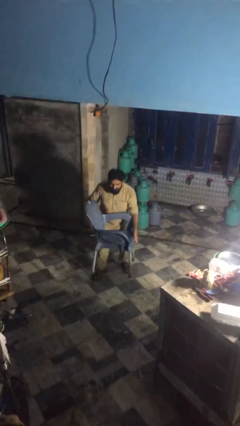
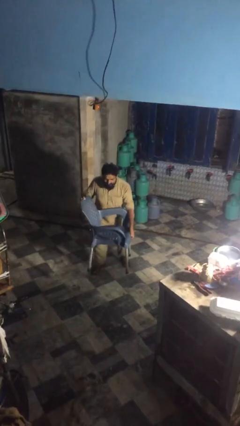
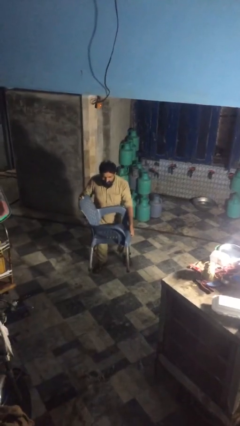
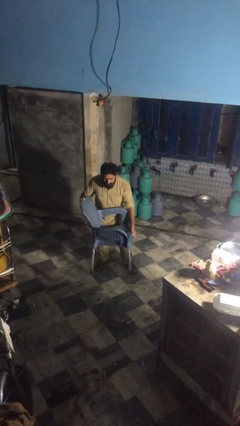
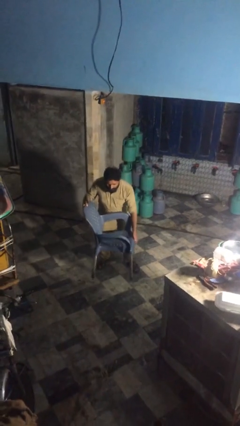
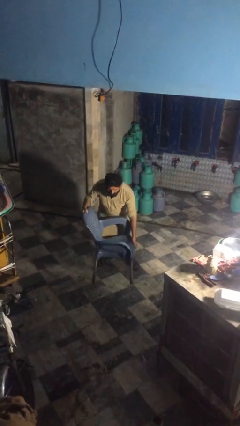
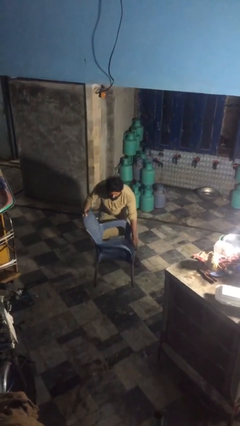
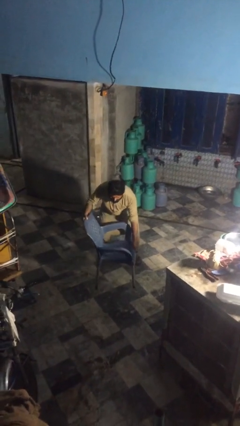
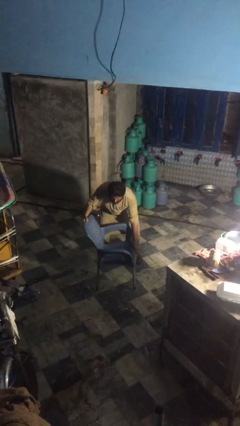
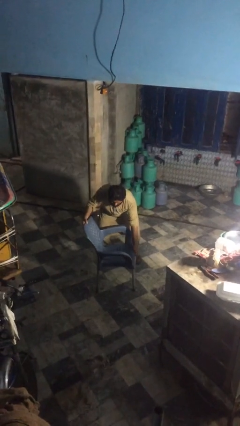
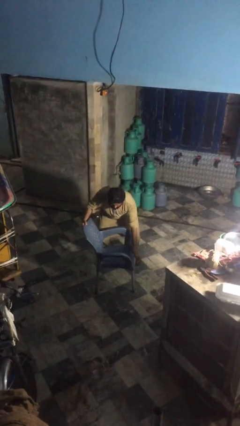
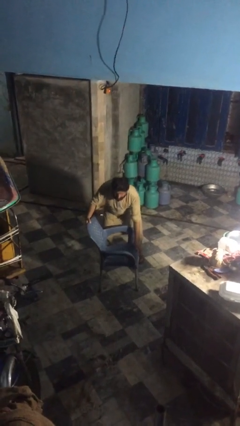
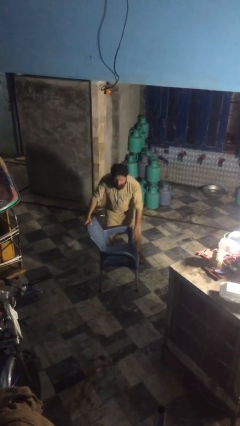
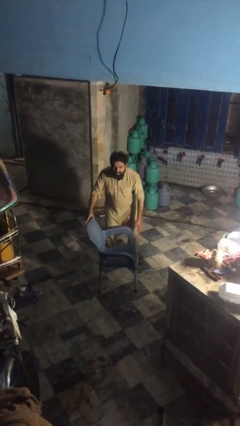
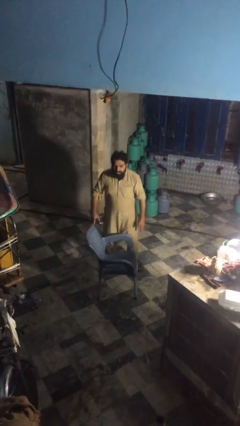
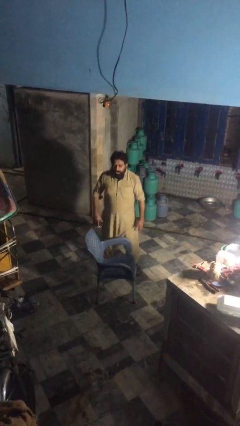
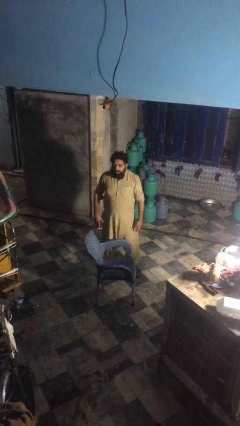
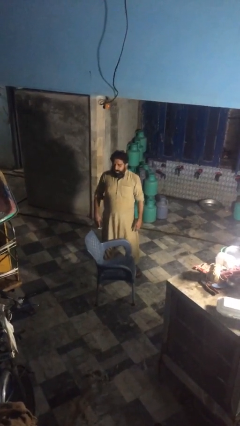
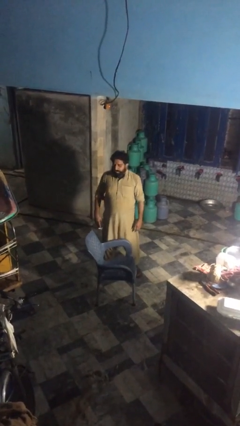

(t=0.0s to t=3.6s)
person puts down object on floor

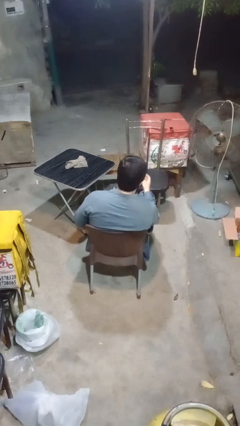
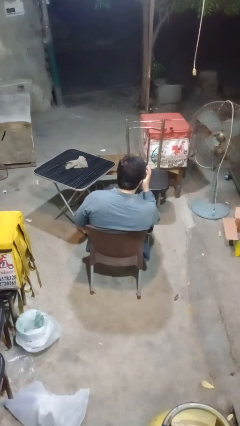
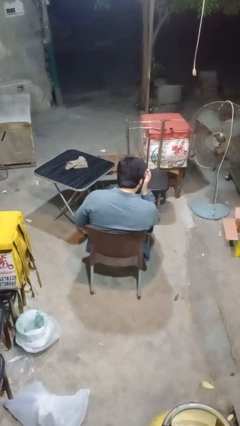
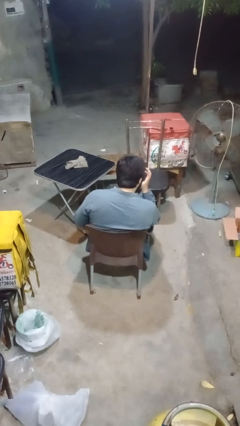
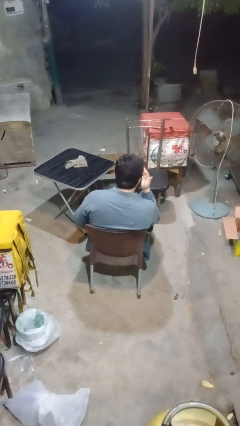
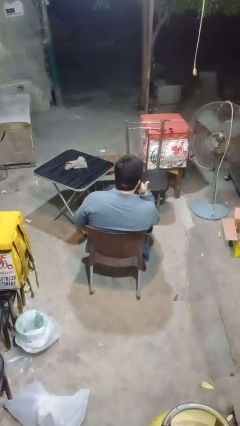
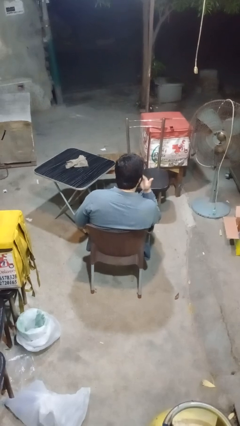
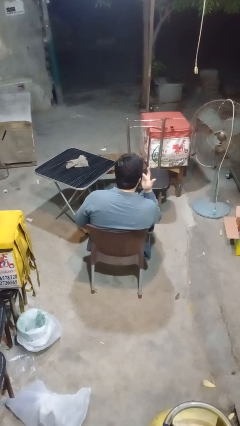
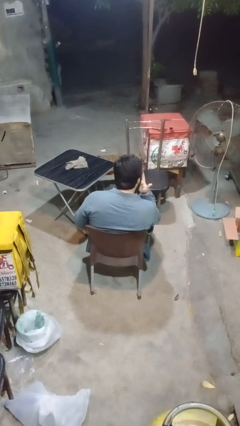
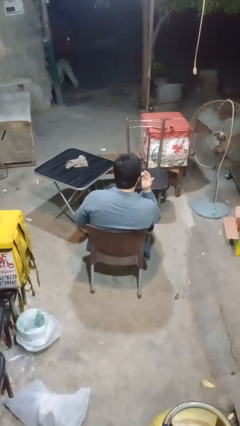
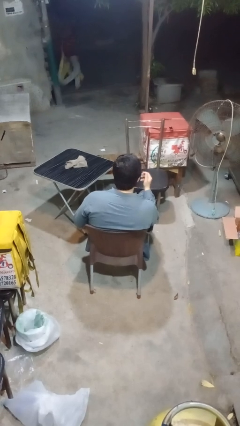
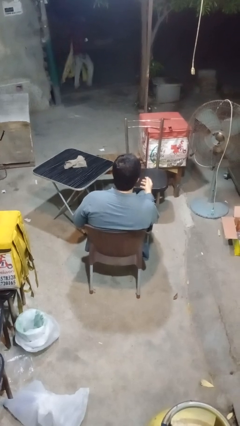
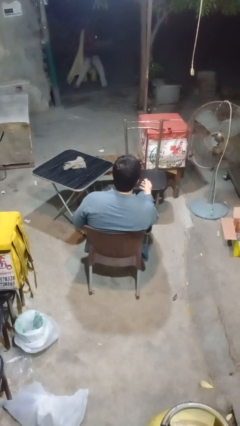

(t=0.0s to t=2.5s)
person licks fingers

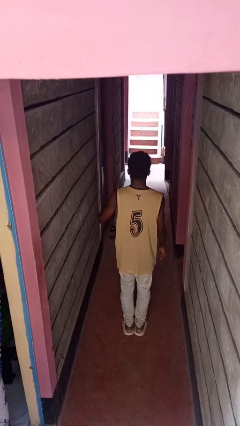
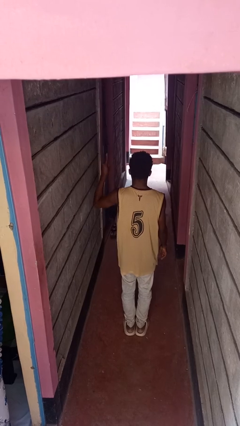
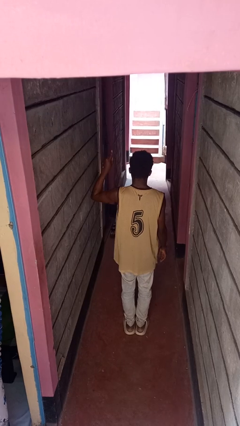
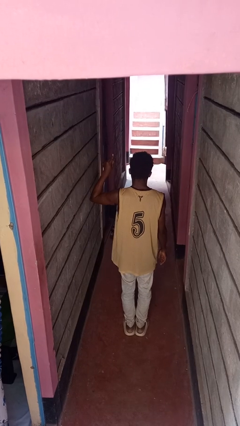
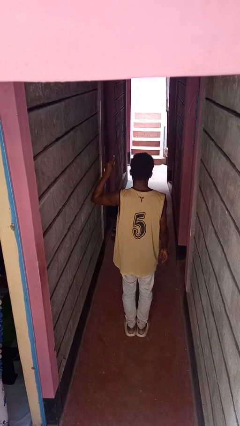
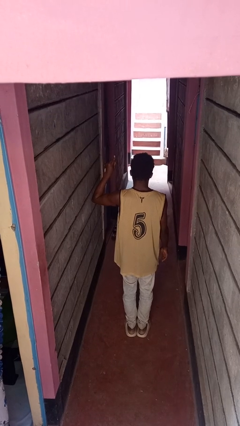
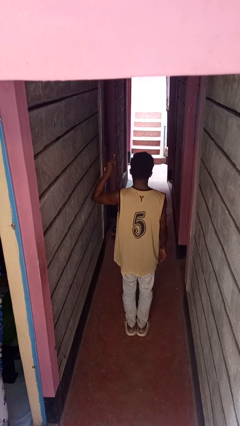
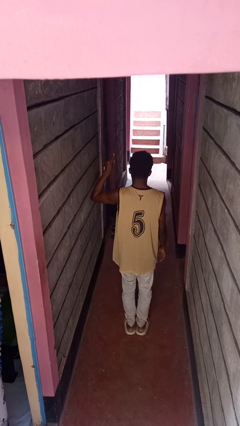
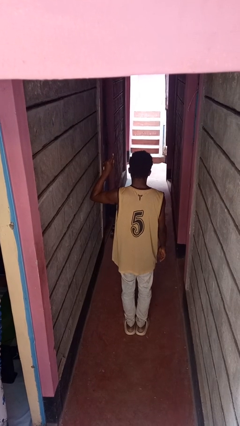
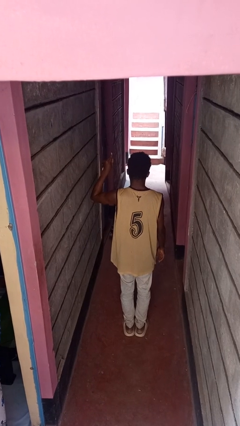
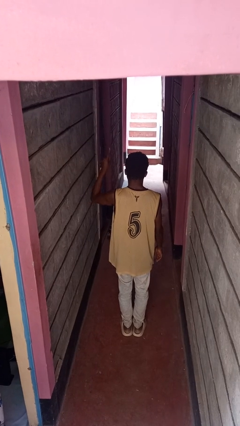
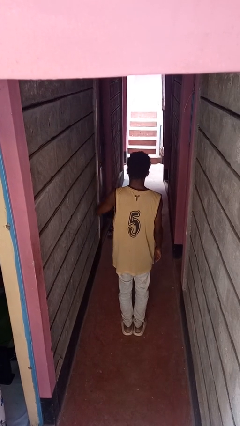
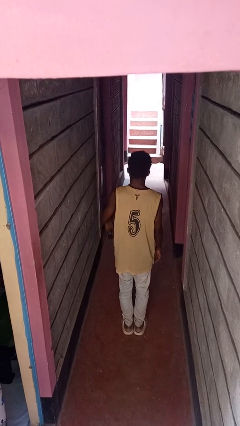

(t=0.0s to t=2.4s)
person gestures number one

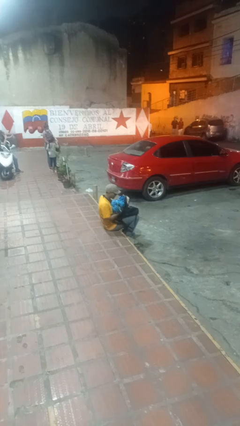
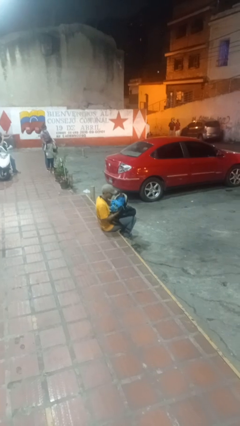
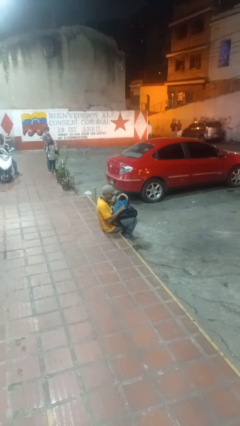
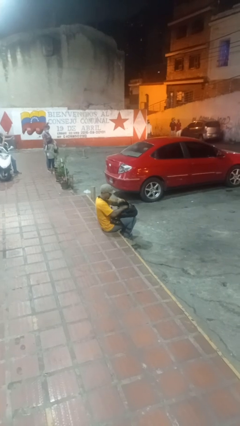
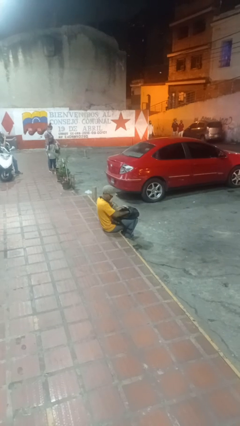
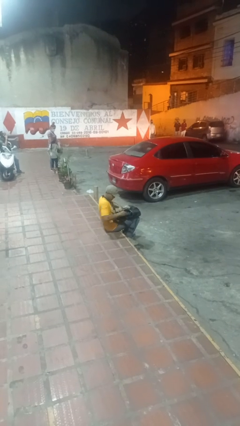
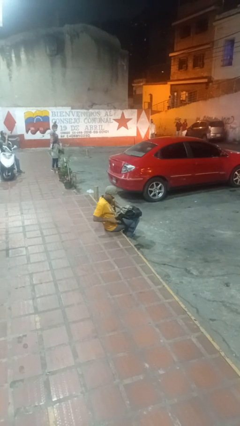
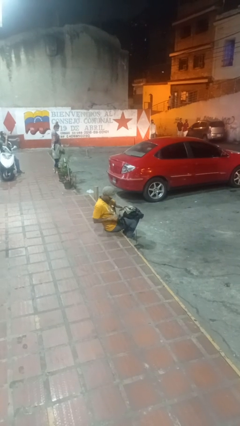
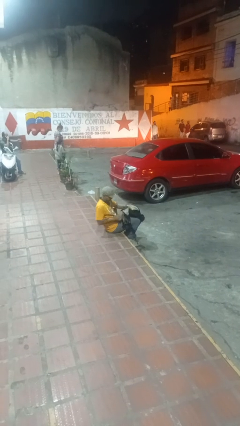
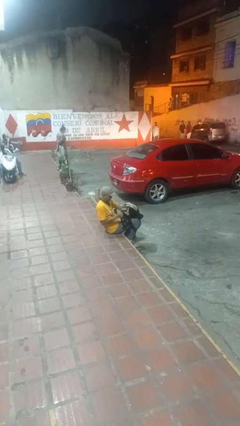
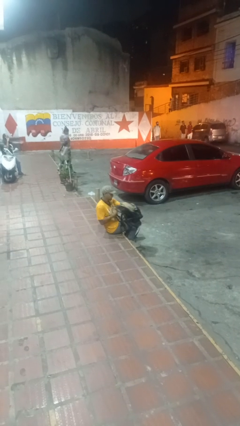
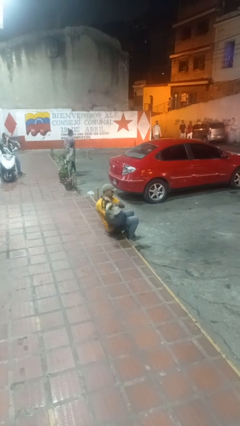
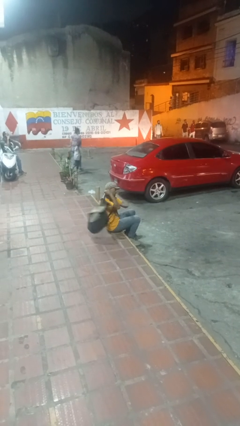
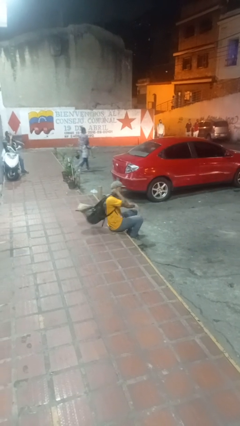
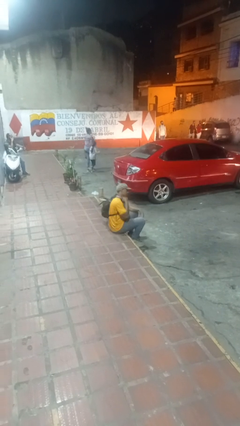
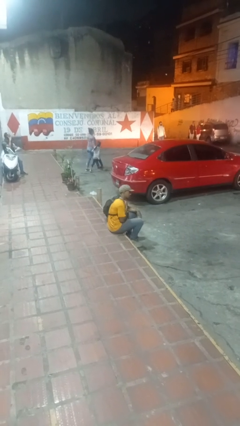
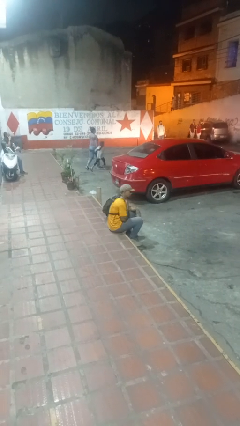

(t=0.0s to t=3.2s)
person puts object into backpack

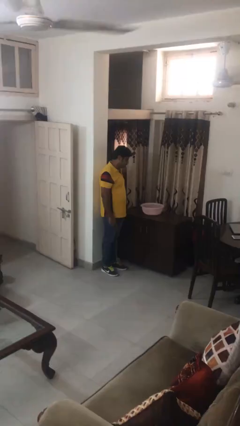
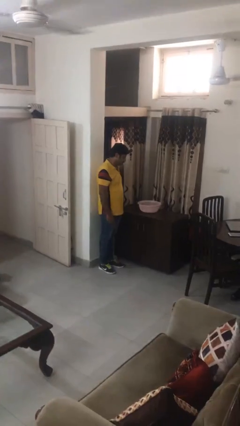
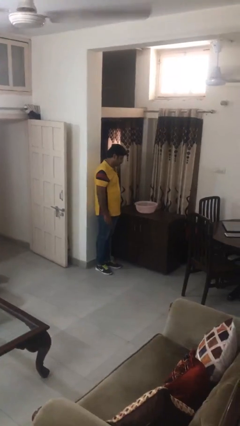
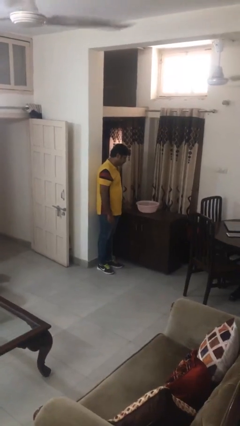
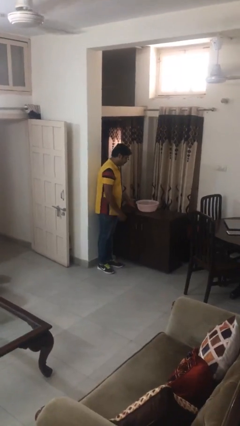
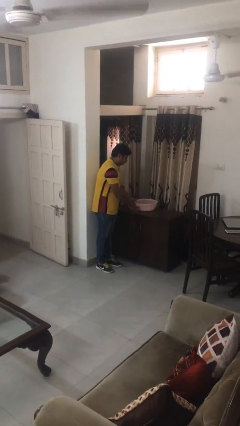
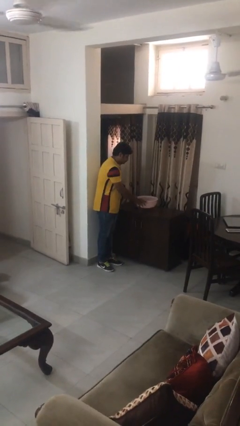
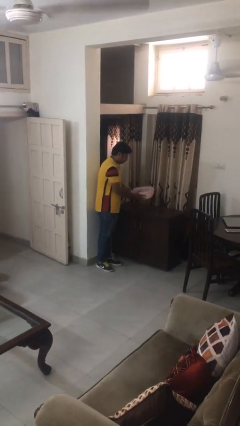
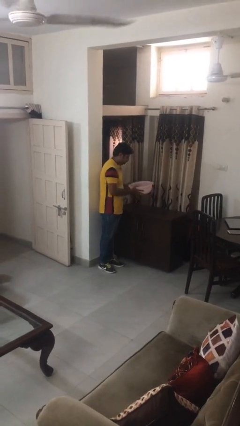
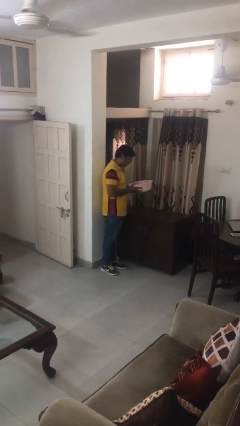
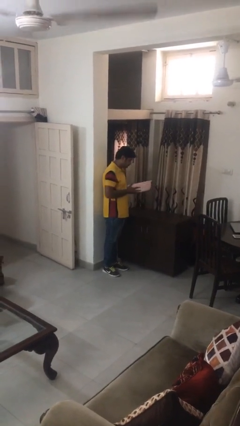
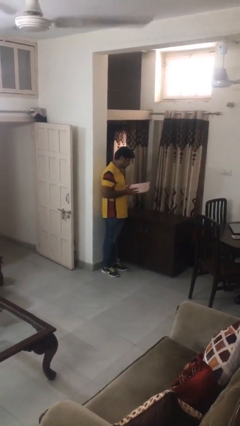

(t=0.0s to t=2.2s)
person picks up object from countertop

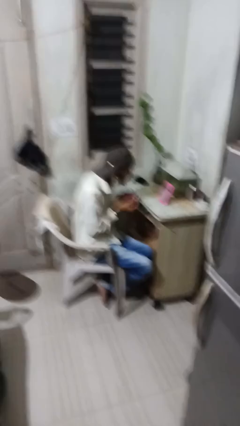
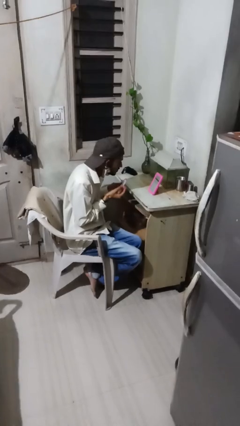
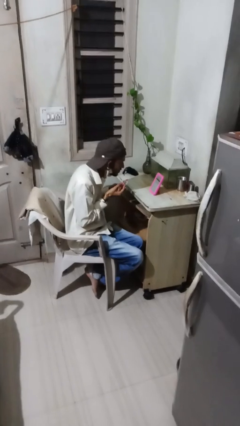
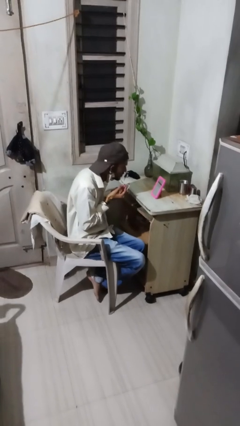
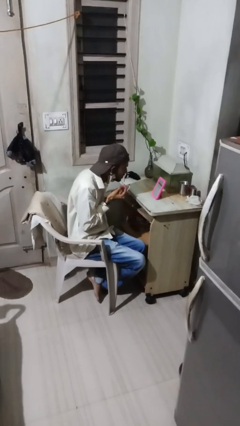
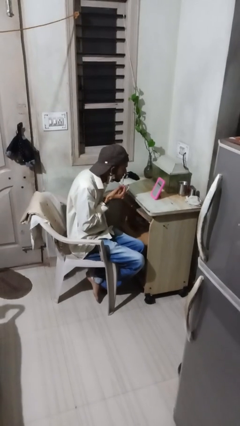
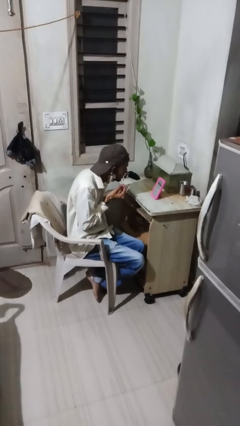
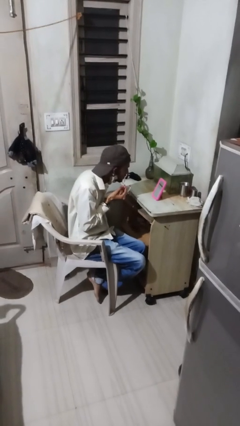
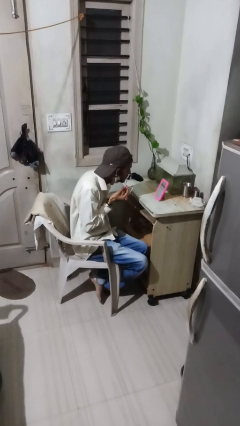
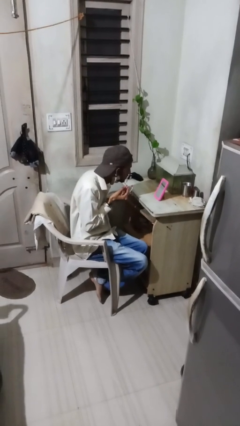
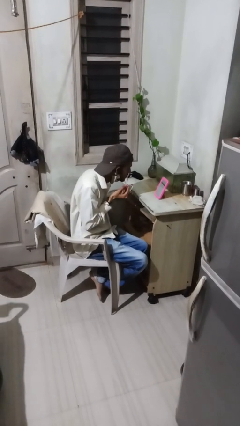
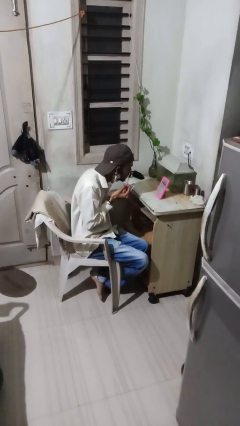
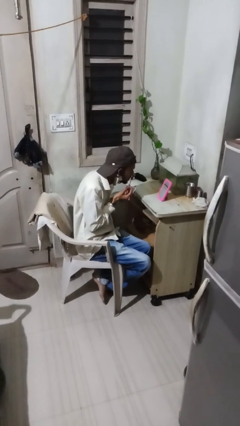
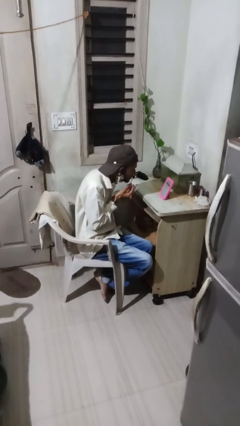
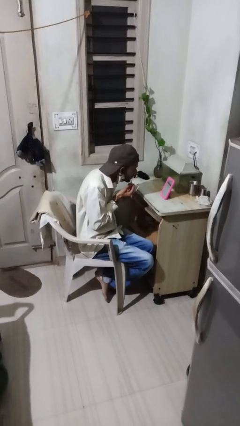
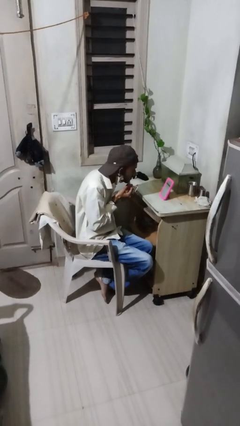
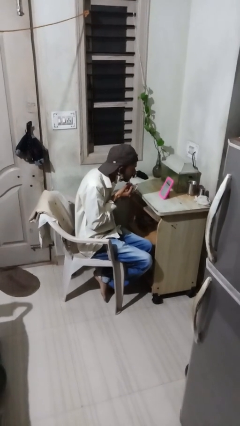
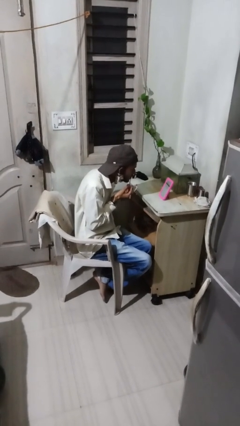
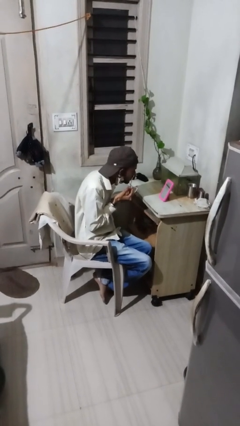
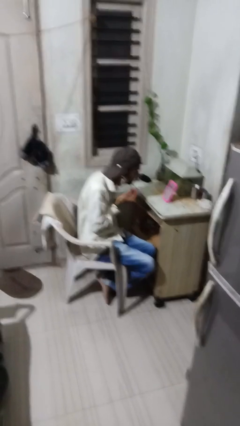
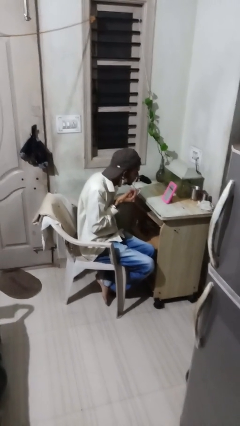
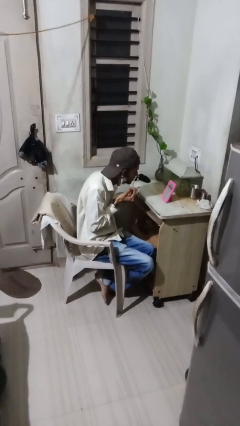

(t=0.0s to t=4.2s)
person applies lip makeup
